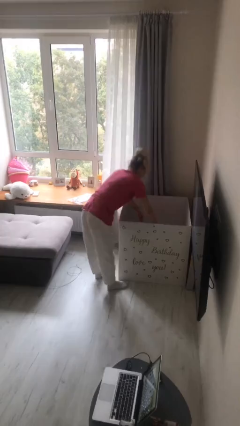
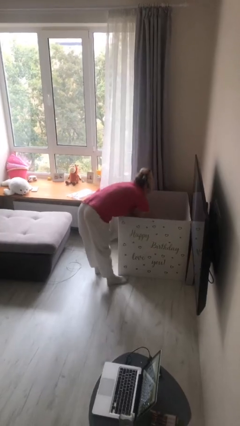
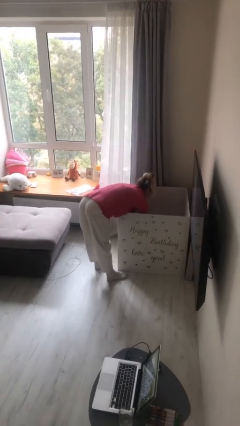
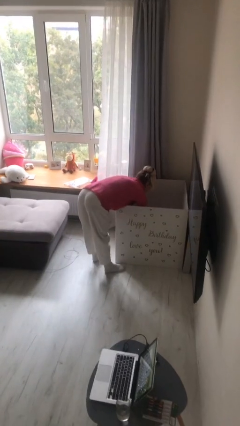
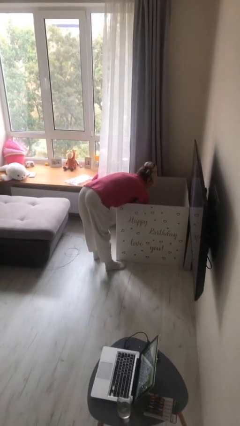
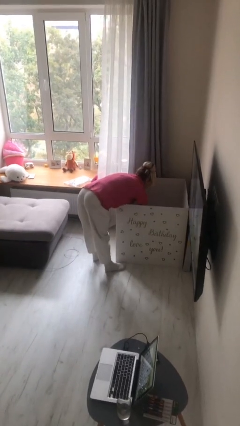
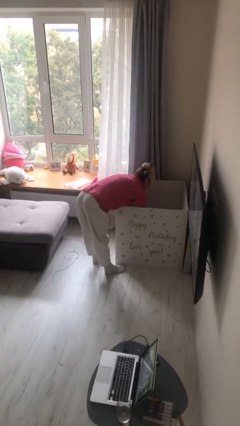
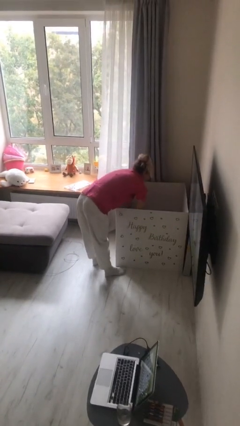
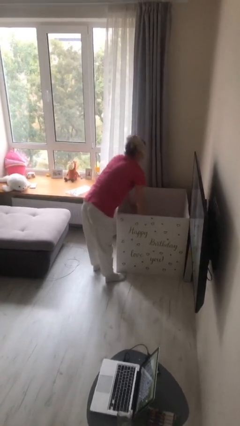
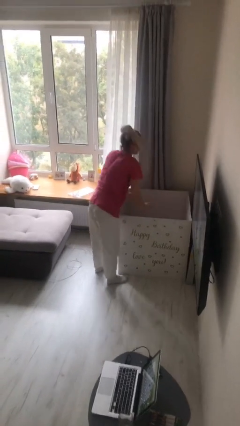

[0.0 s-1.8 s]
person searches in box

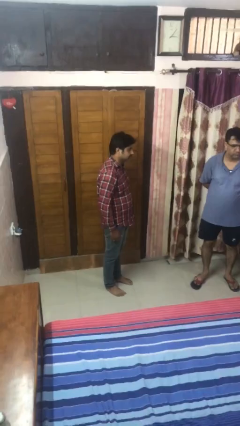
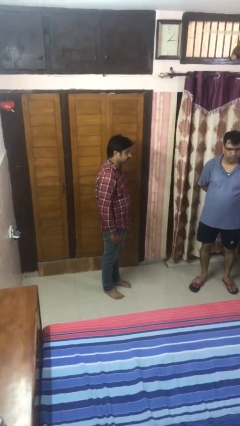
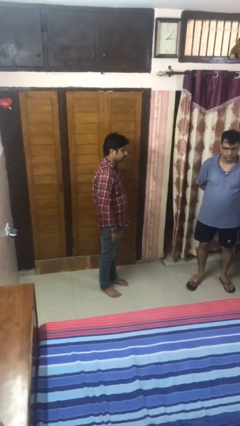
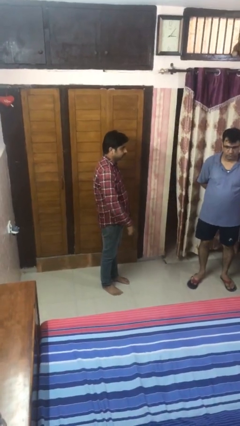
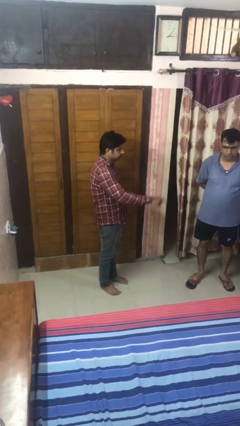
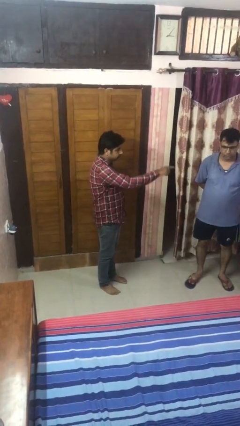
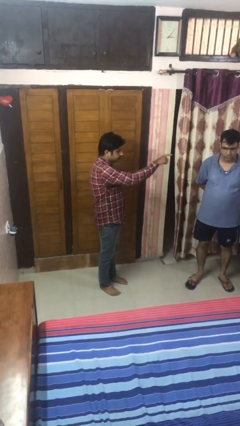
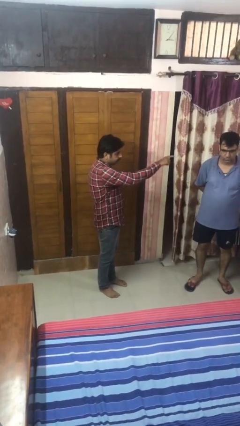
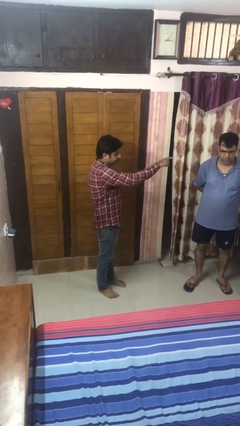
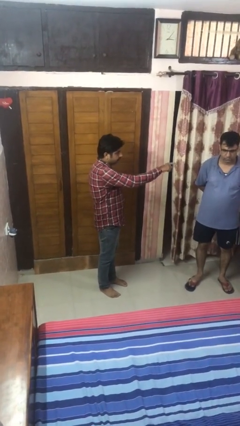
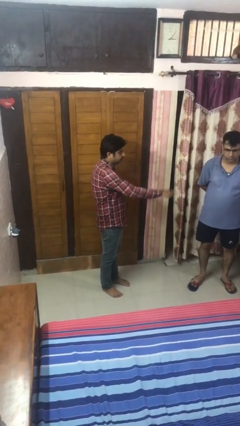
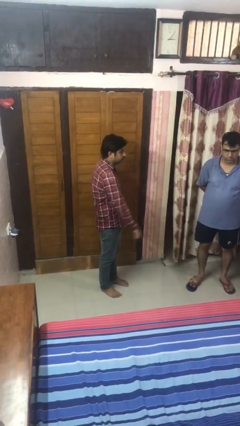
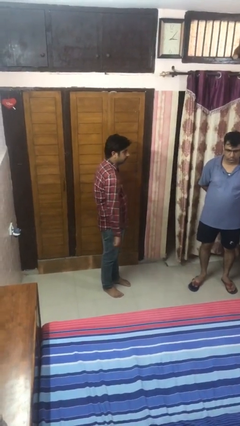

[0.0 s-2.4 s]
person points at person

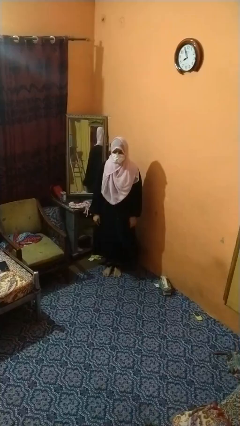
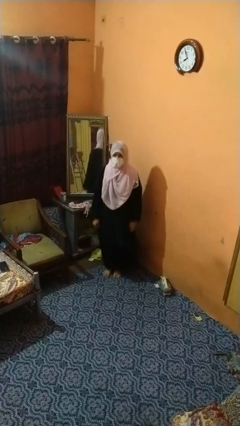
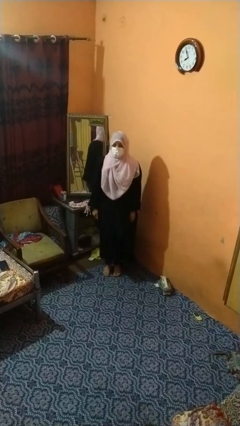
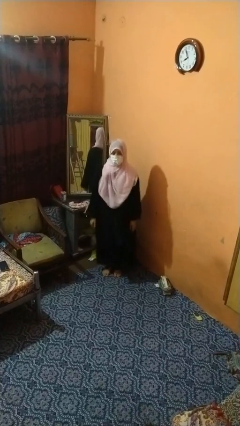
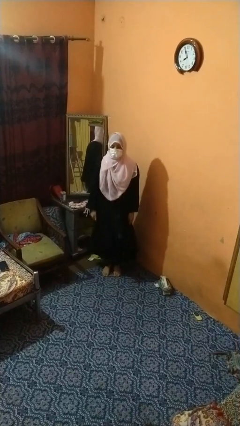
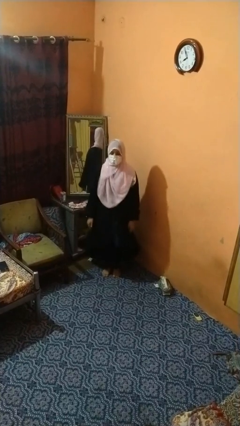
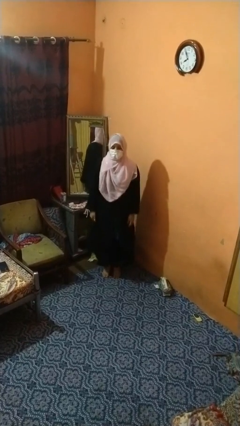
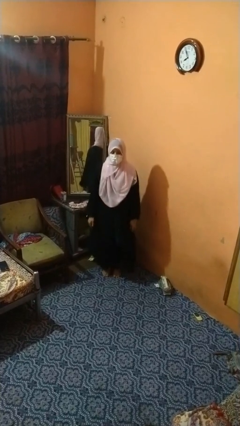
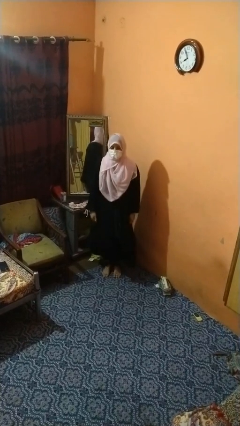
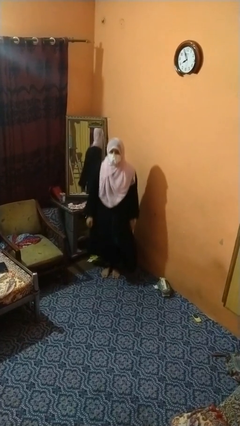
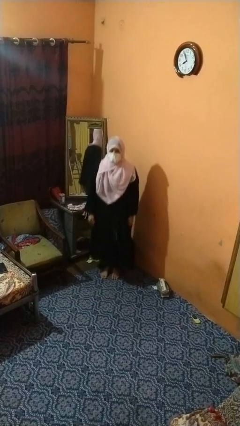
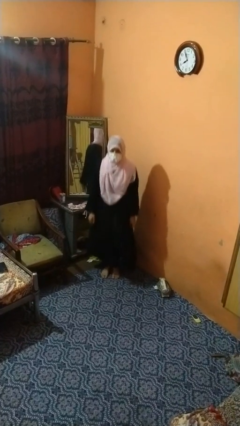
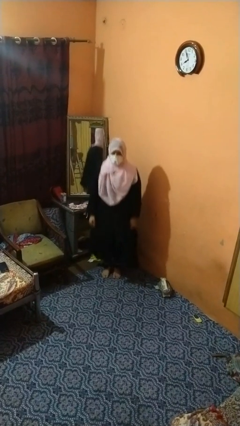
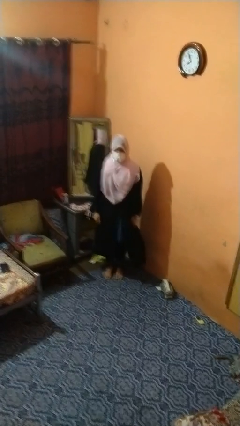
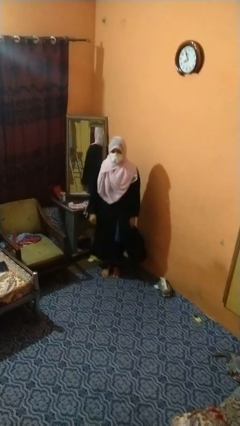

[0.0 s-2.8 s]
person jumps

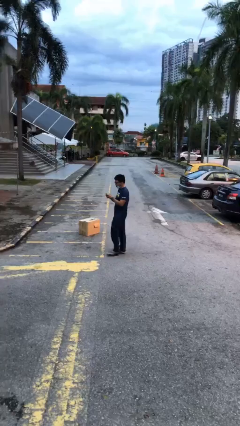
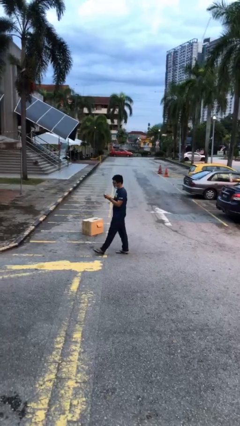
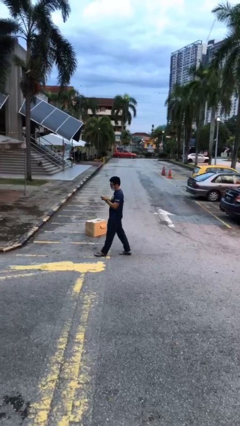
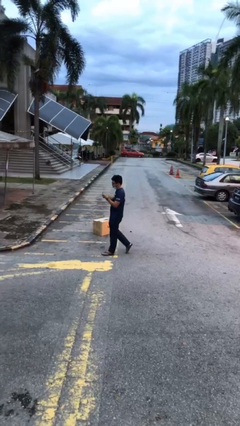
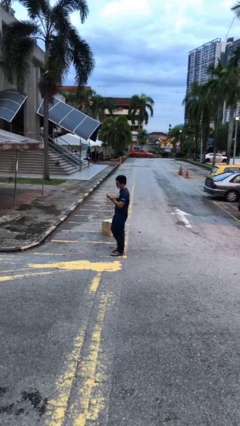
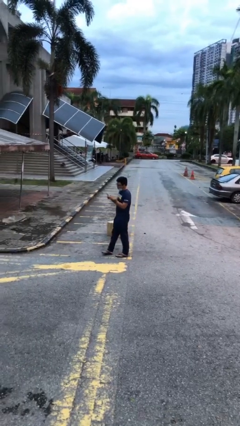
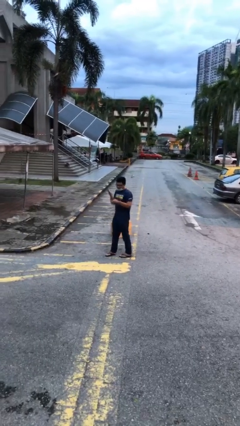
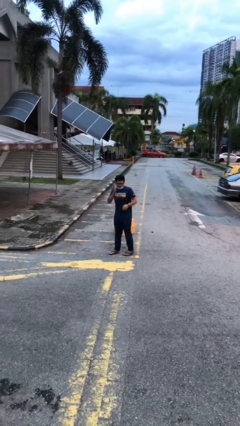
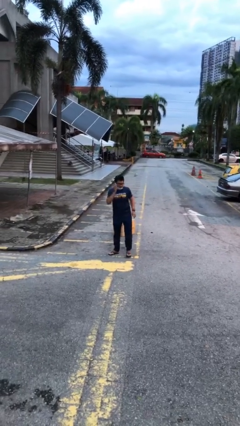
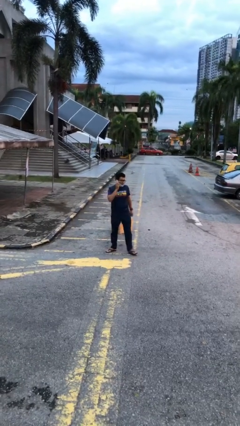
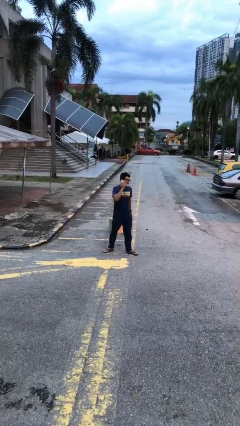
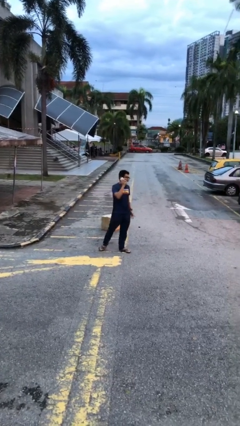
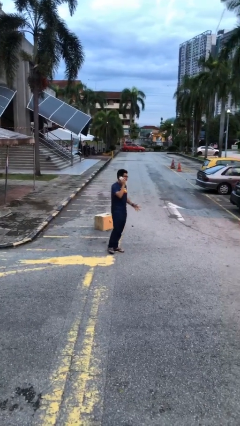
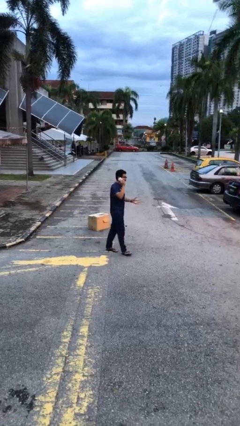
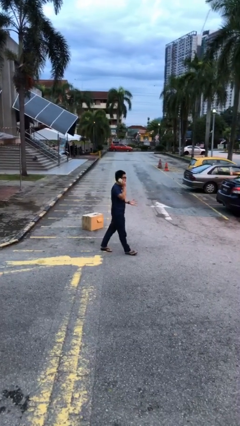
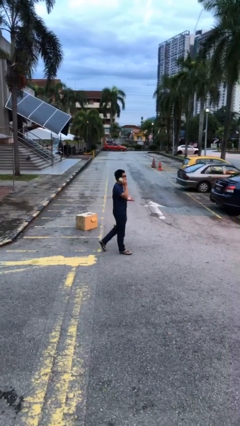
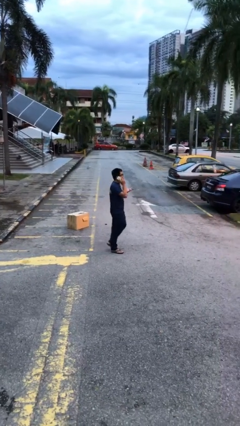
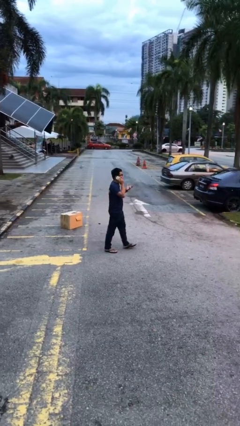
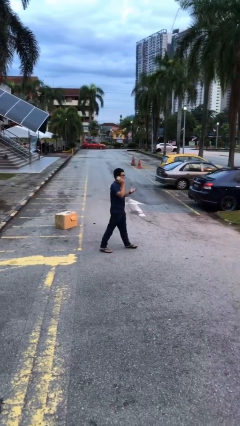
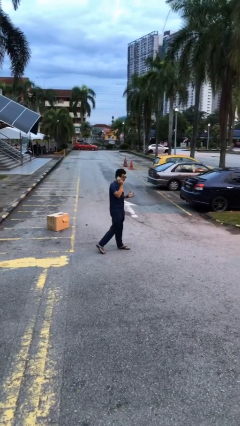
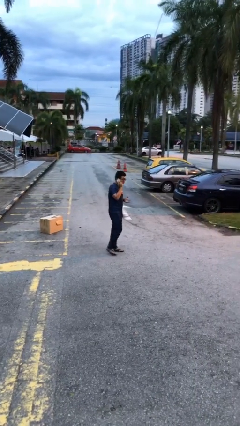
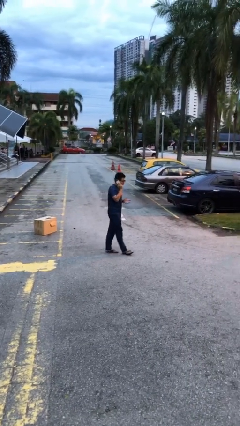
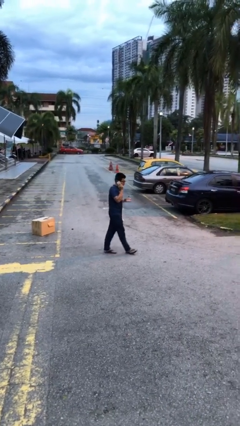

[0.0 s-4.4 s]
person talks on phone

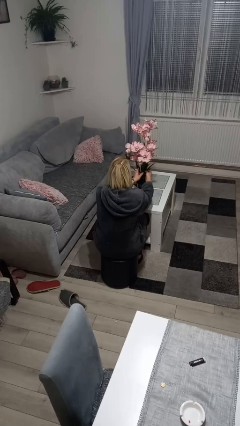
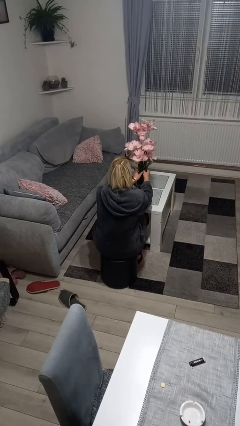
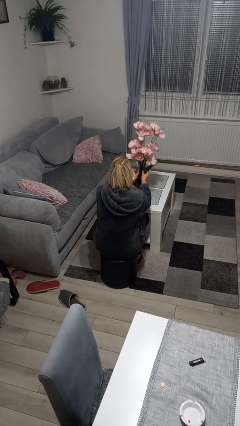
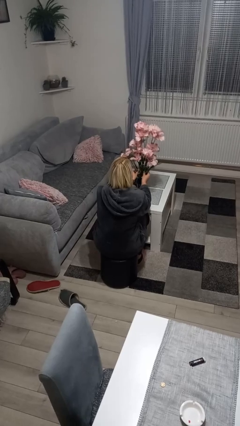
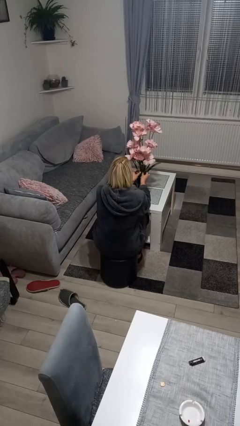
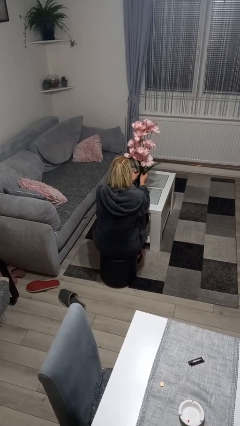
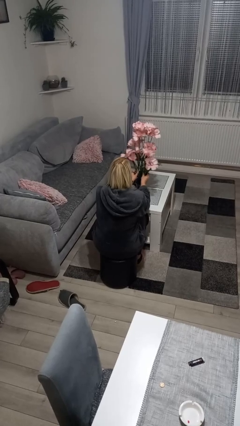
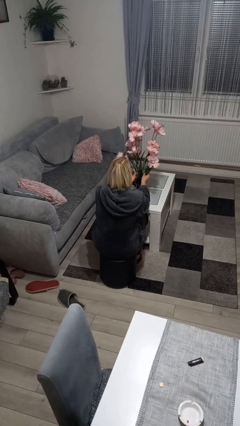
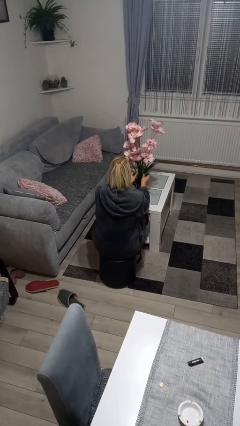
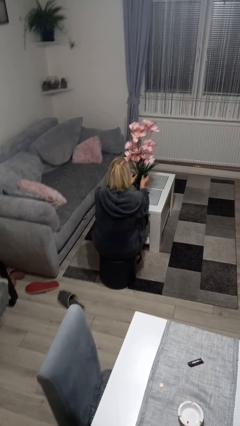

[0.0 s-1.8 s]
person arranges flowers in vase

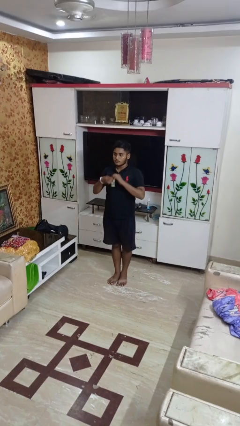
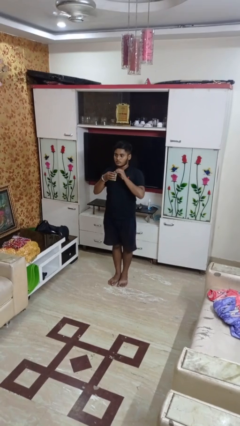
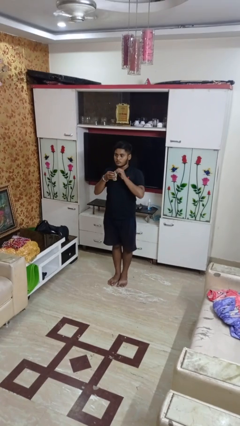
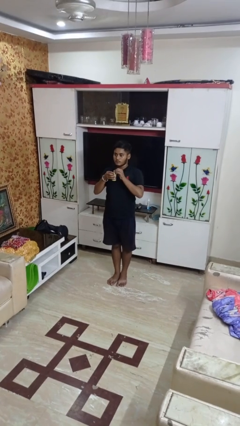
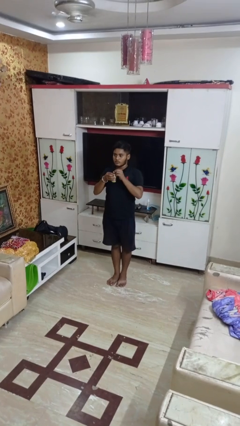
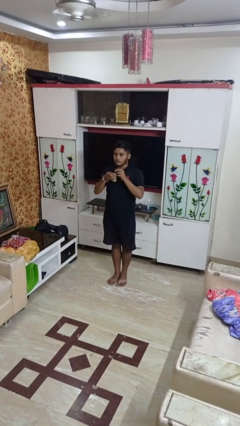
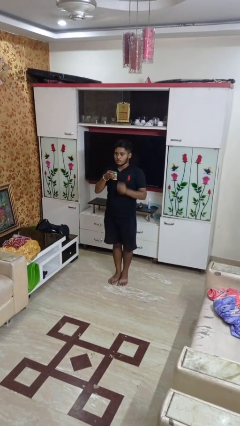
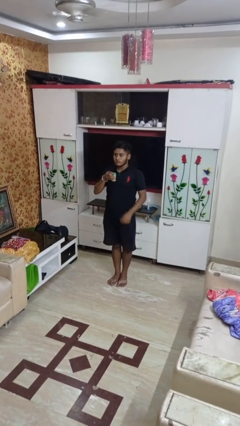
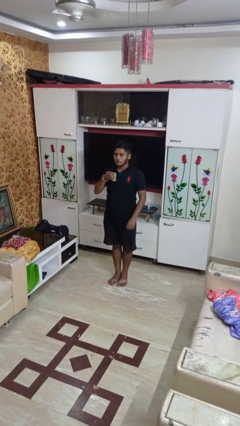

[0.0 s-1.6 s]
person opens beverage can

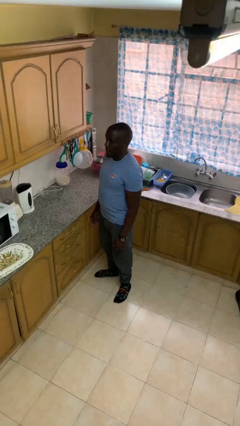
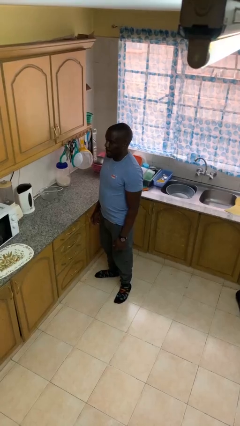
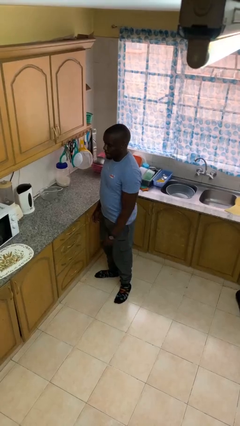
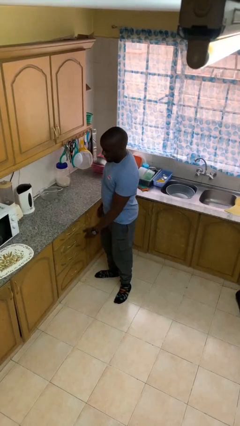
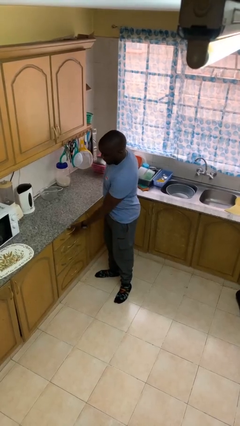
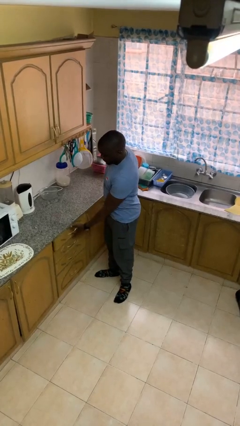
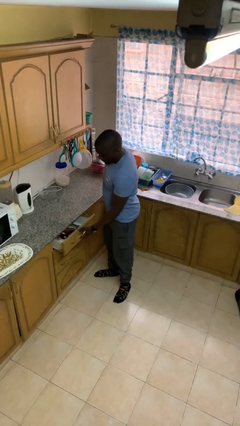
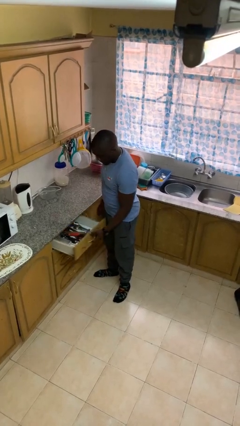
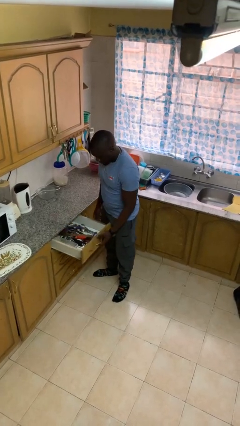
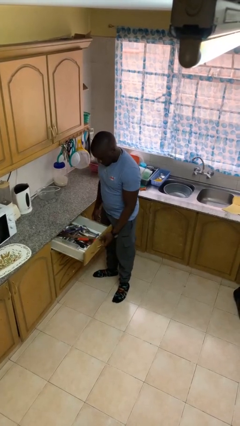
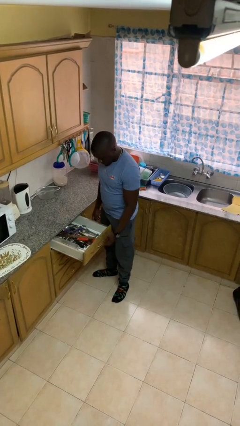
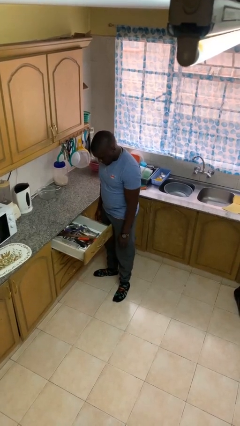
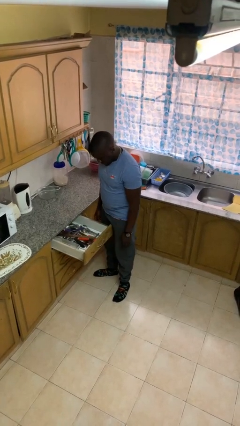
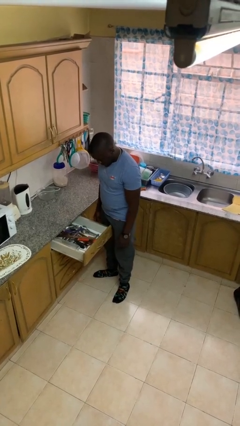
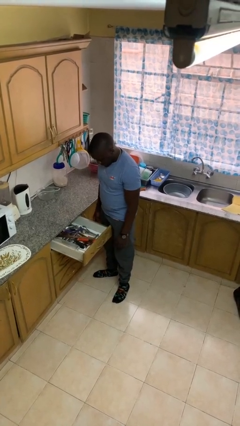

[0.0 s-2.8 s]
person opens kitchen drawer
